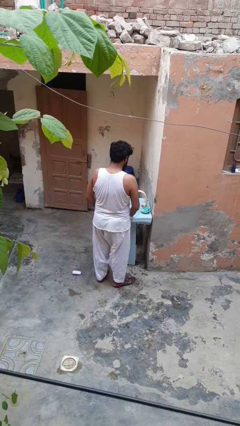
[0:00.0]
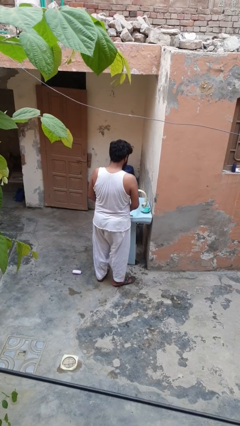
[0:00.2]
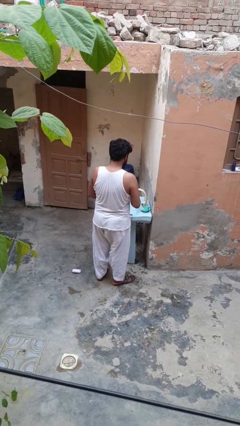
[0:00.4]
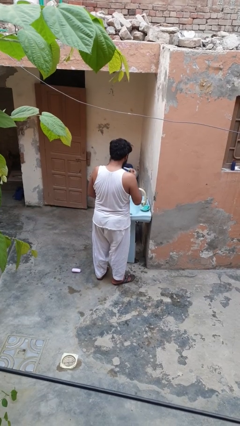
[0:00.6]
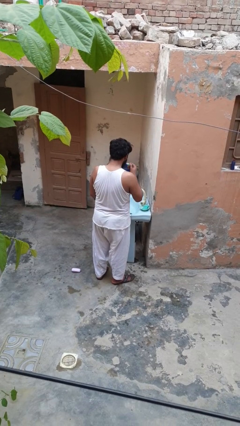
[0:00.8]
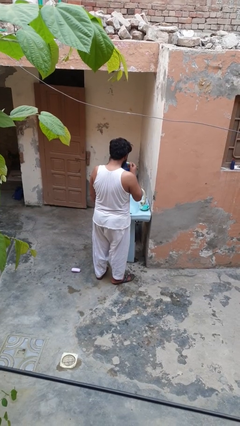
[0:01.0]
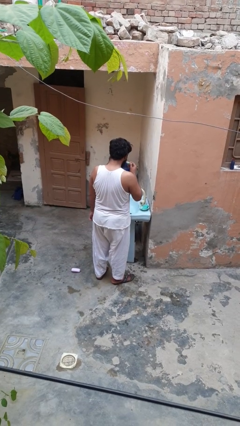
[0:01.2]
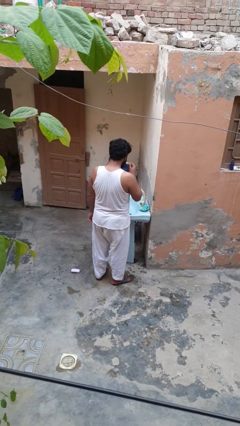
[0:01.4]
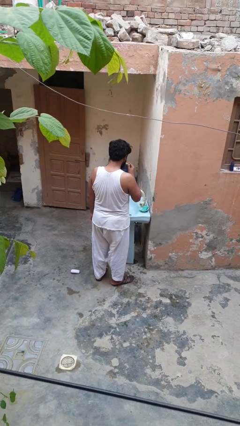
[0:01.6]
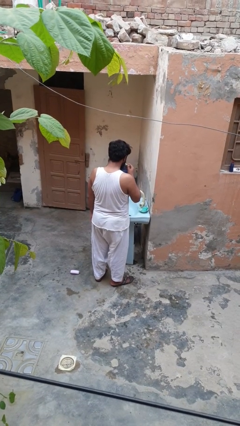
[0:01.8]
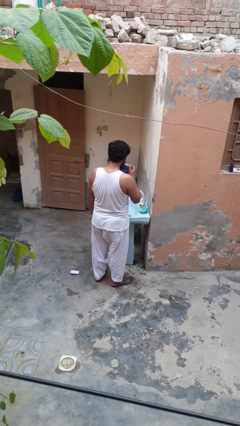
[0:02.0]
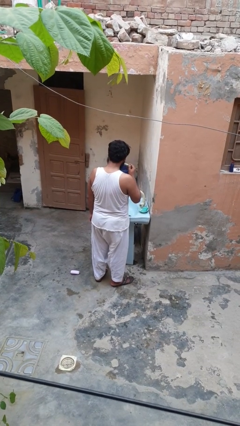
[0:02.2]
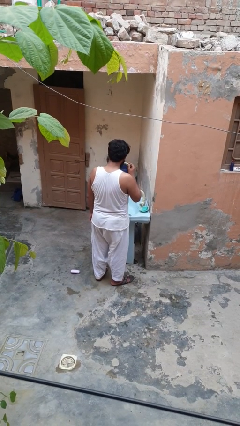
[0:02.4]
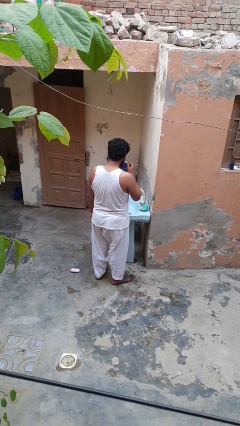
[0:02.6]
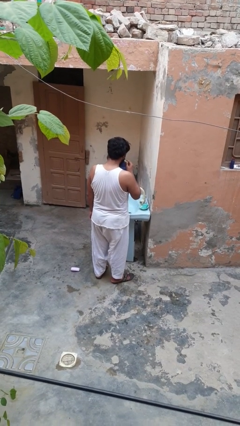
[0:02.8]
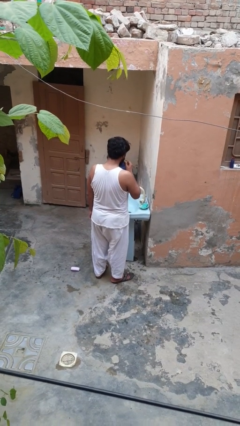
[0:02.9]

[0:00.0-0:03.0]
person brushes teeth

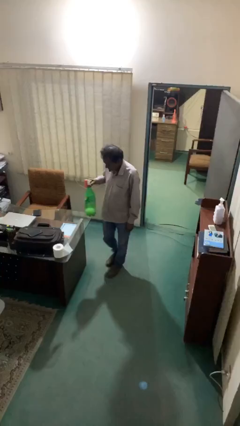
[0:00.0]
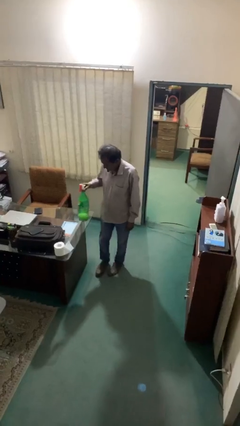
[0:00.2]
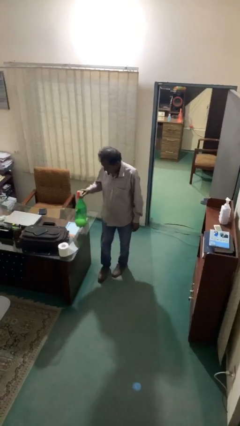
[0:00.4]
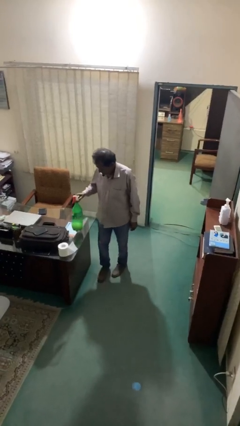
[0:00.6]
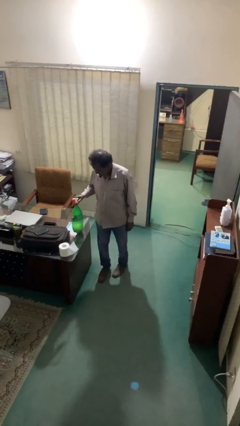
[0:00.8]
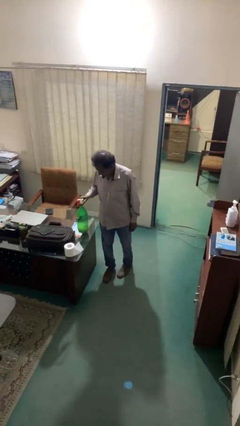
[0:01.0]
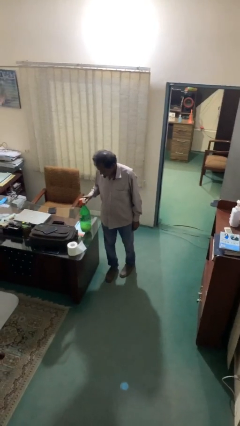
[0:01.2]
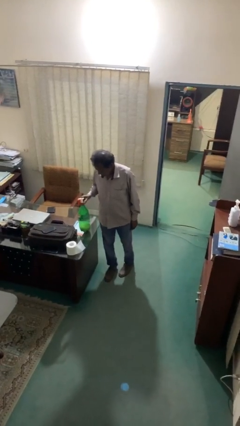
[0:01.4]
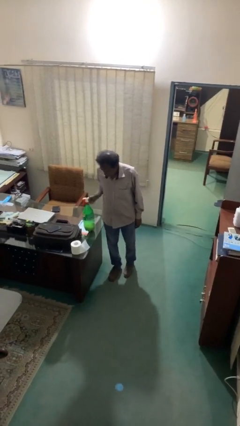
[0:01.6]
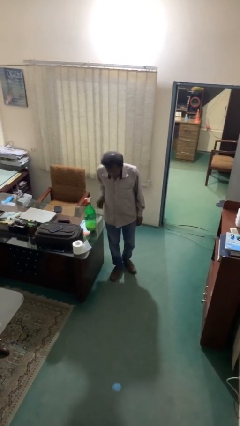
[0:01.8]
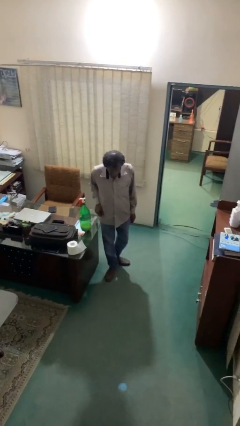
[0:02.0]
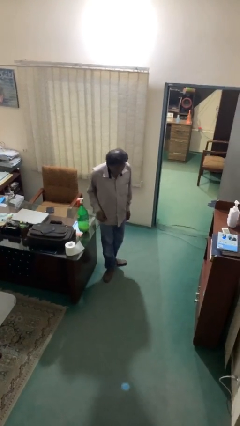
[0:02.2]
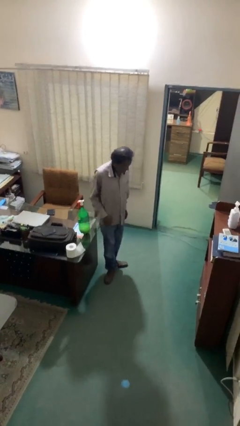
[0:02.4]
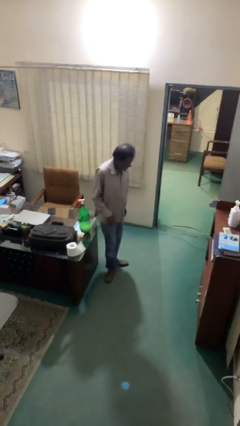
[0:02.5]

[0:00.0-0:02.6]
person puts down object on table

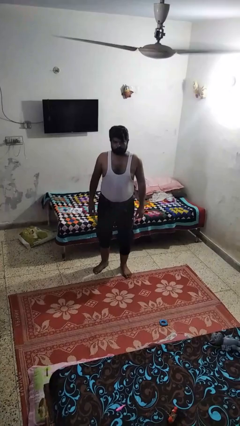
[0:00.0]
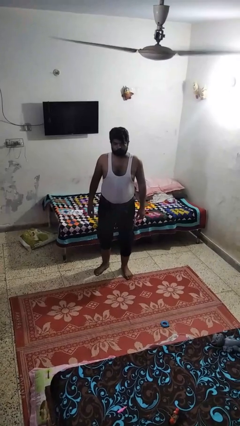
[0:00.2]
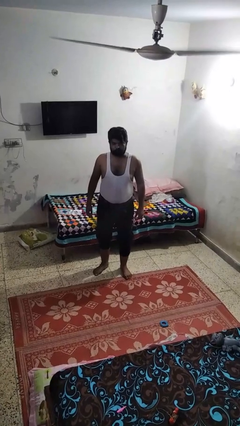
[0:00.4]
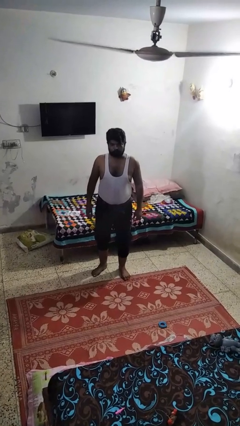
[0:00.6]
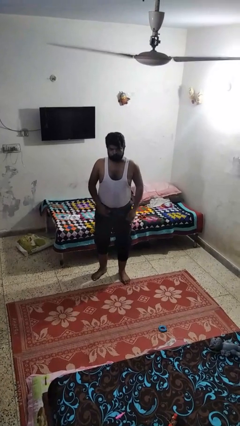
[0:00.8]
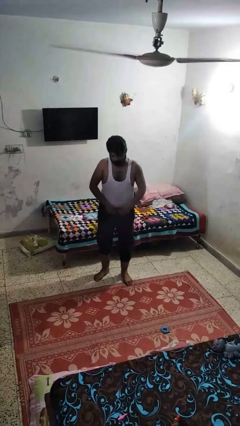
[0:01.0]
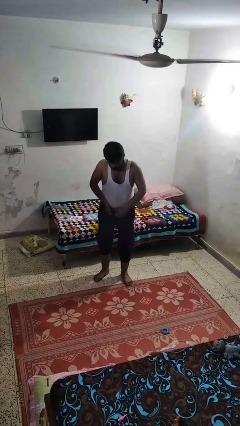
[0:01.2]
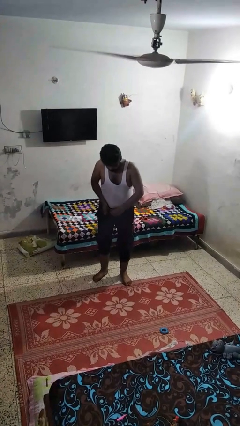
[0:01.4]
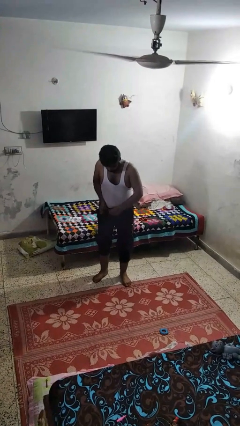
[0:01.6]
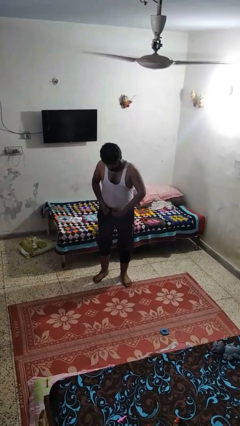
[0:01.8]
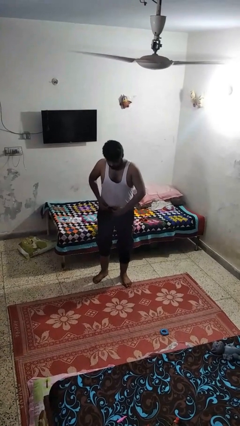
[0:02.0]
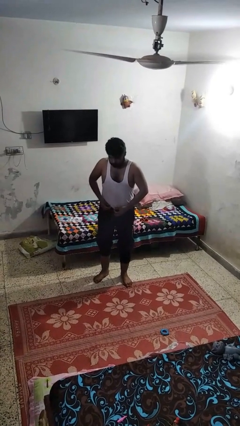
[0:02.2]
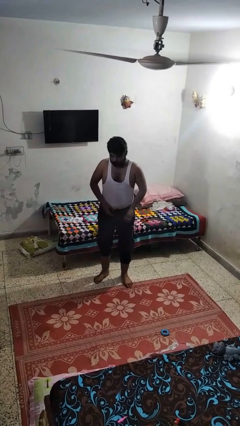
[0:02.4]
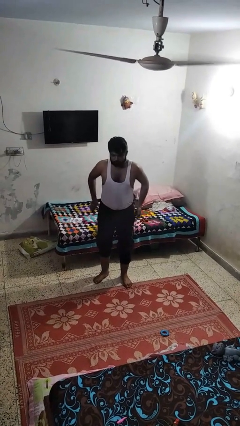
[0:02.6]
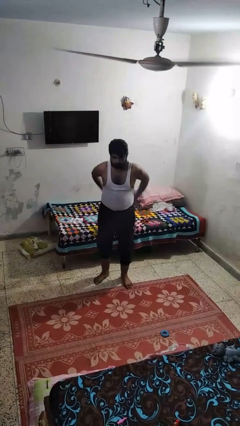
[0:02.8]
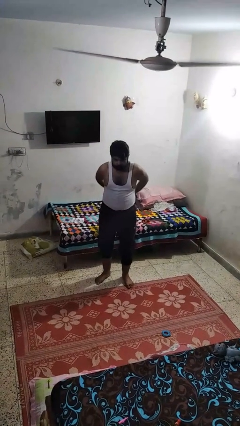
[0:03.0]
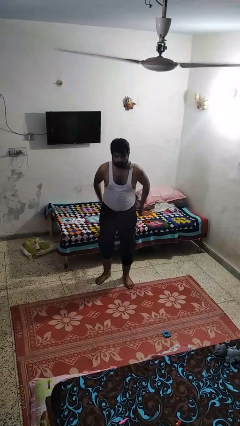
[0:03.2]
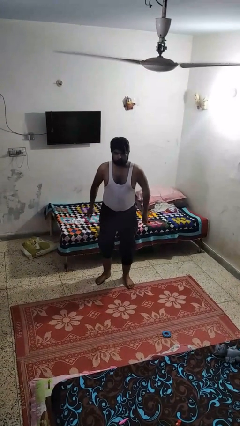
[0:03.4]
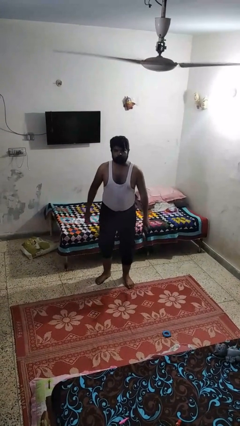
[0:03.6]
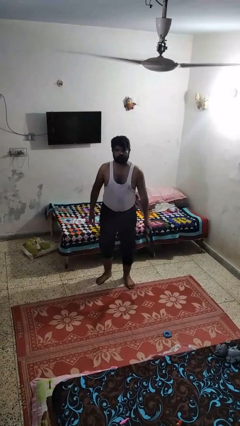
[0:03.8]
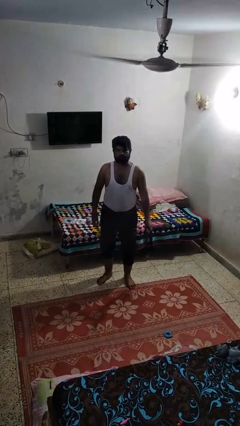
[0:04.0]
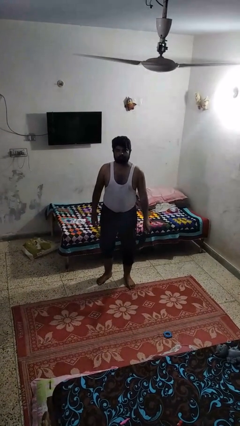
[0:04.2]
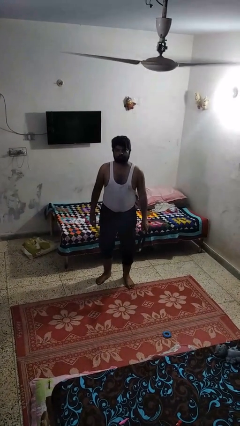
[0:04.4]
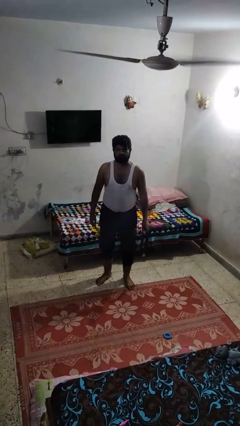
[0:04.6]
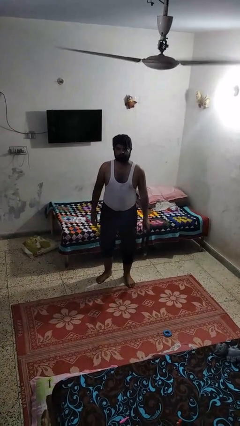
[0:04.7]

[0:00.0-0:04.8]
person takes off belt

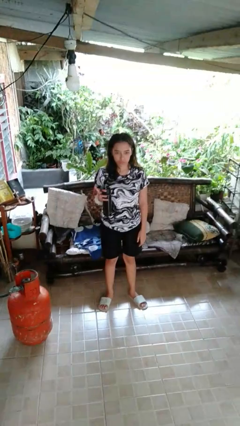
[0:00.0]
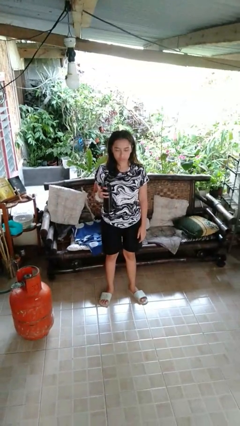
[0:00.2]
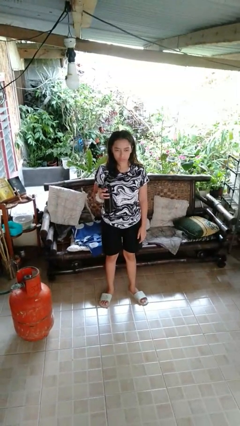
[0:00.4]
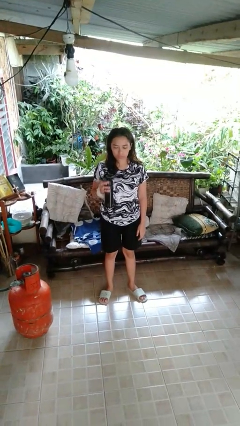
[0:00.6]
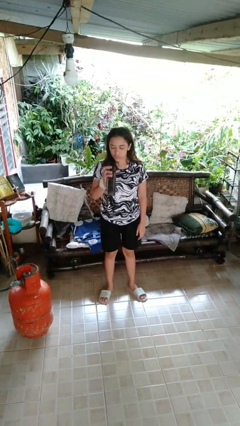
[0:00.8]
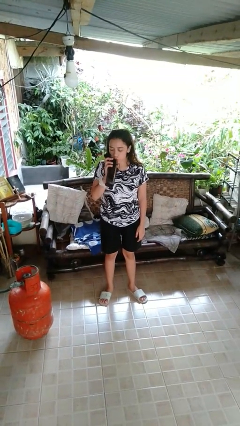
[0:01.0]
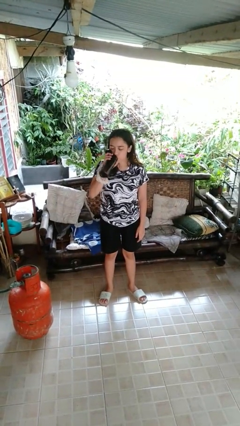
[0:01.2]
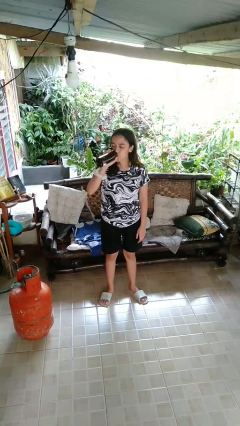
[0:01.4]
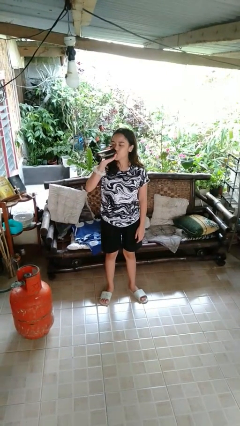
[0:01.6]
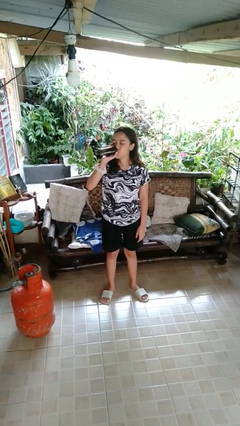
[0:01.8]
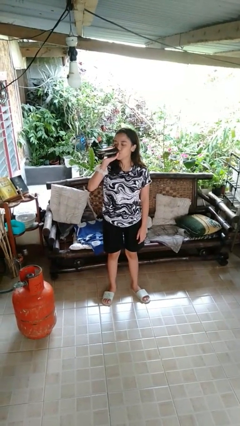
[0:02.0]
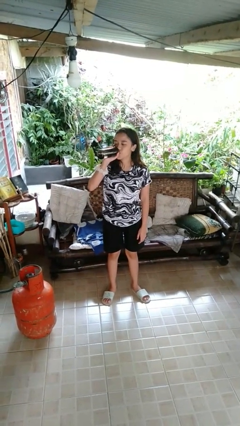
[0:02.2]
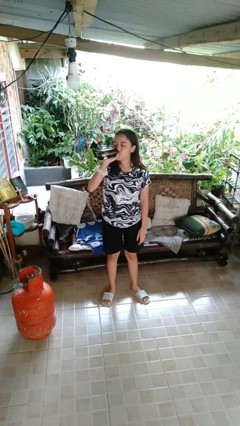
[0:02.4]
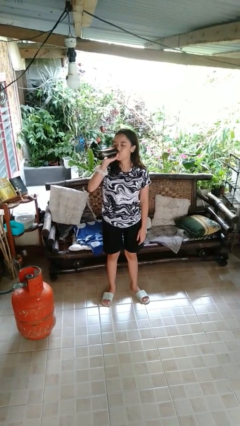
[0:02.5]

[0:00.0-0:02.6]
person drinks from bottle

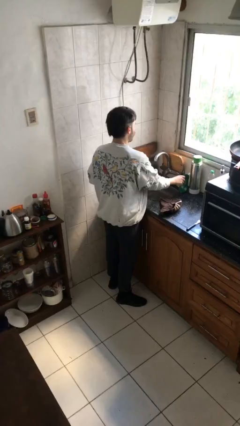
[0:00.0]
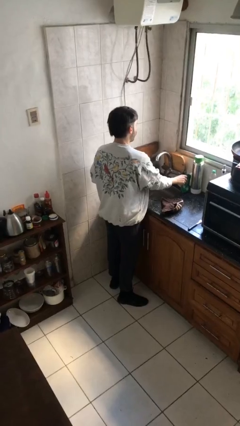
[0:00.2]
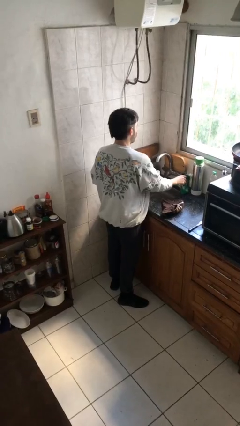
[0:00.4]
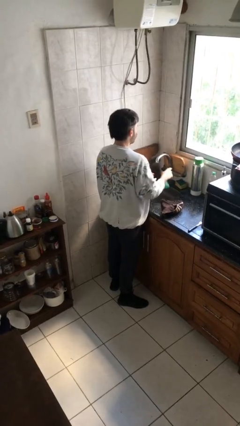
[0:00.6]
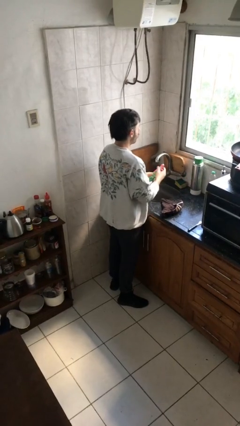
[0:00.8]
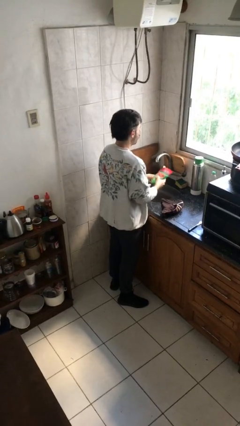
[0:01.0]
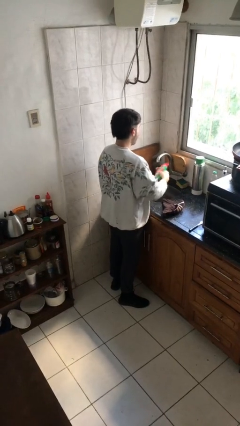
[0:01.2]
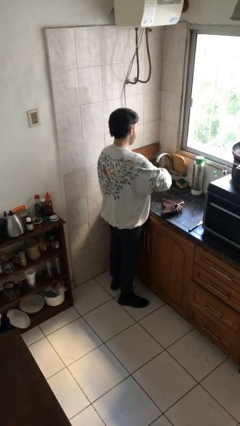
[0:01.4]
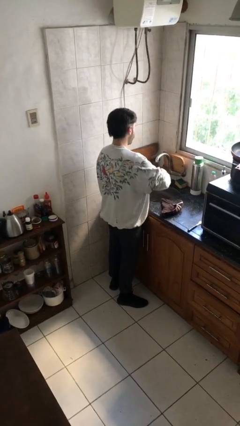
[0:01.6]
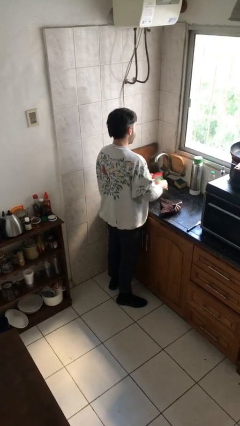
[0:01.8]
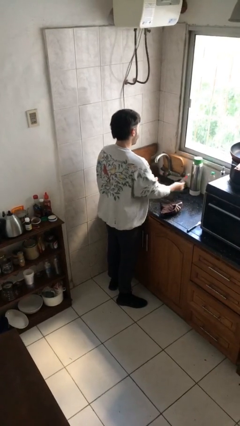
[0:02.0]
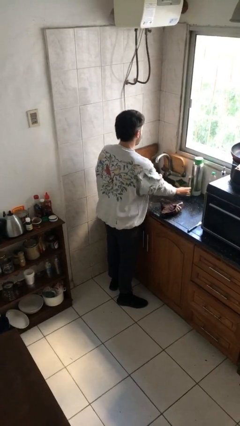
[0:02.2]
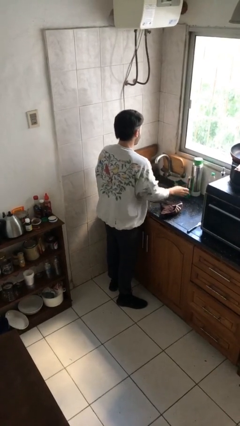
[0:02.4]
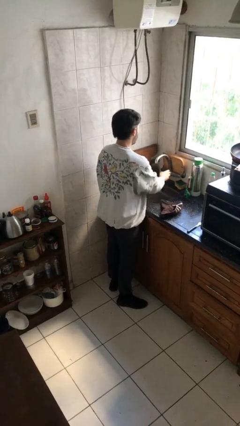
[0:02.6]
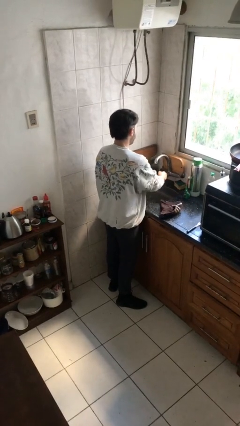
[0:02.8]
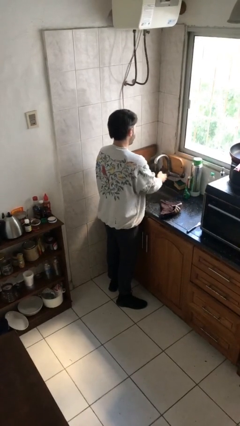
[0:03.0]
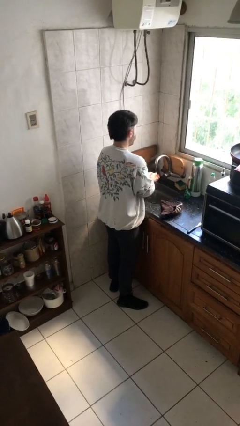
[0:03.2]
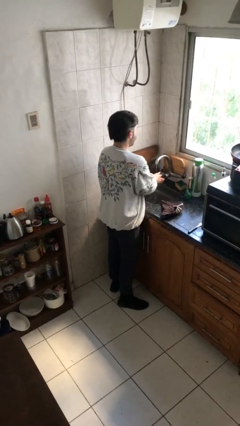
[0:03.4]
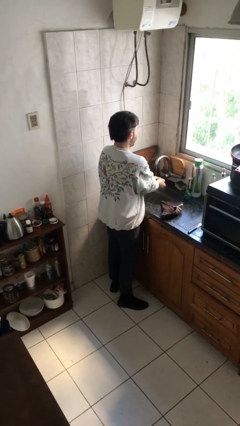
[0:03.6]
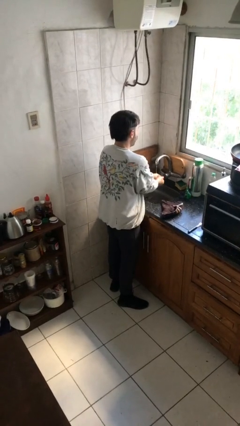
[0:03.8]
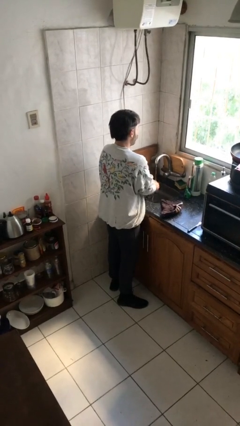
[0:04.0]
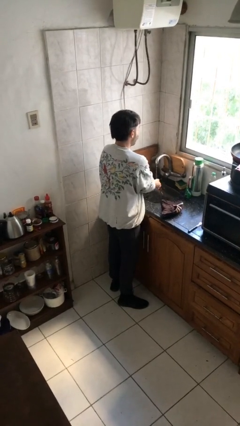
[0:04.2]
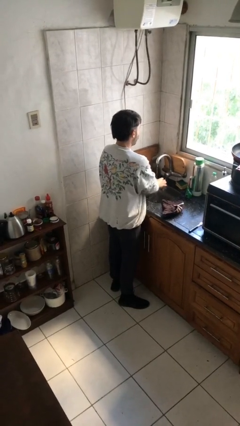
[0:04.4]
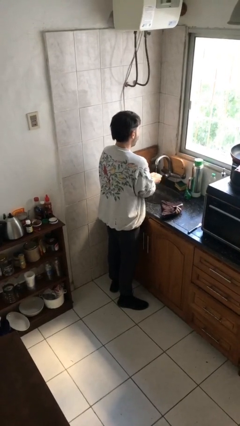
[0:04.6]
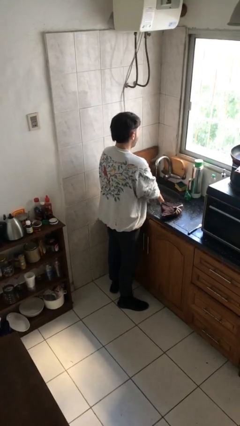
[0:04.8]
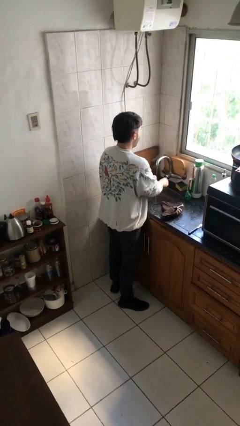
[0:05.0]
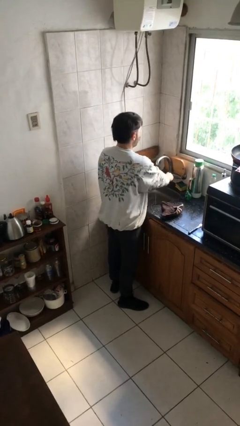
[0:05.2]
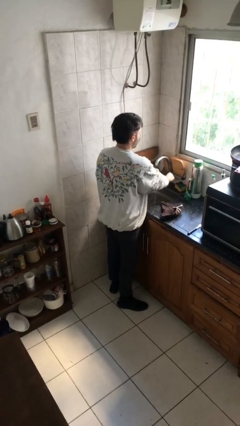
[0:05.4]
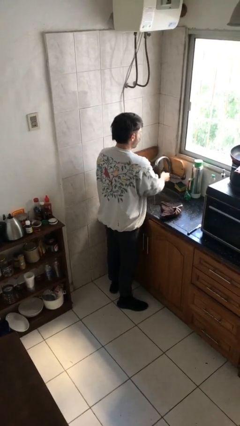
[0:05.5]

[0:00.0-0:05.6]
person washes hands
